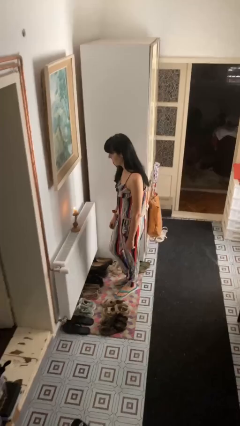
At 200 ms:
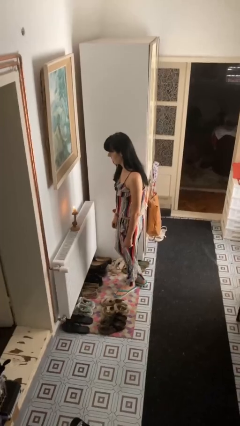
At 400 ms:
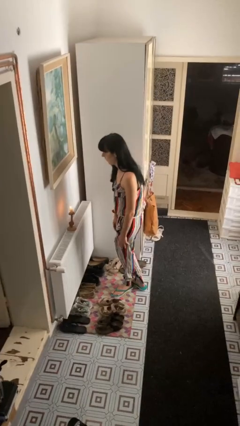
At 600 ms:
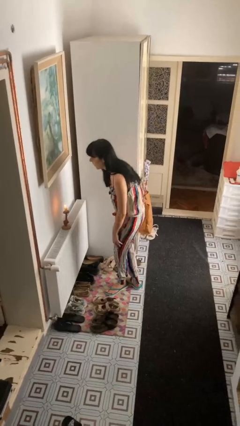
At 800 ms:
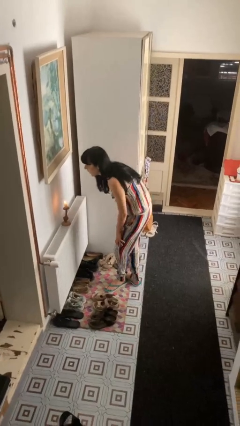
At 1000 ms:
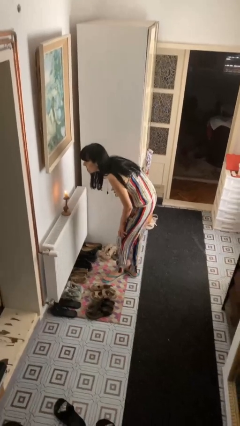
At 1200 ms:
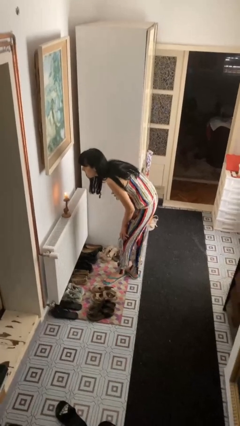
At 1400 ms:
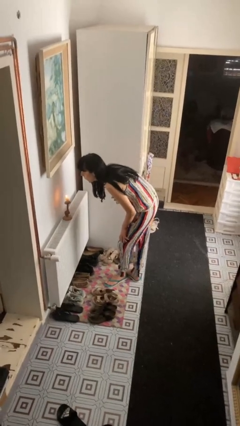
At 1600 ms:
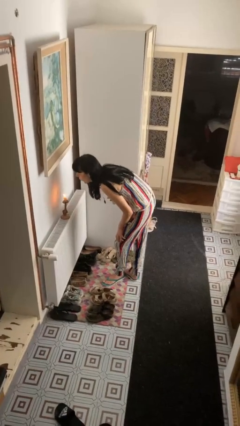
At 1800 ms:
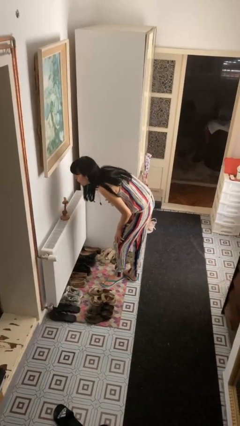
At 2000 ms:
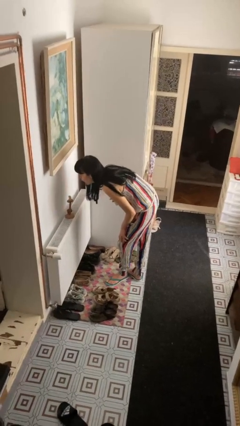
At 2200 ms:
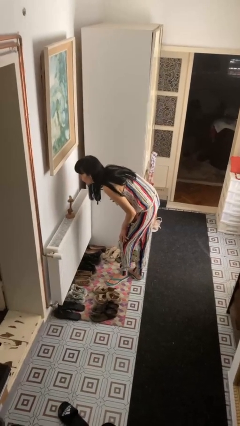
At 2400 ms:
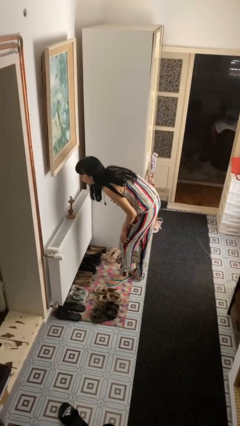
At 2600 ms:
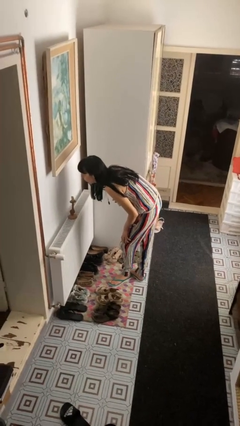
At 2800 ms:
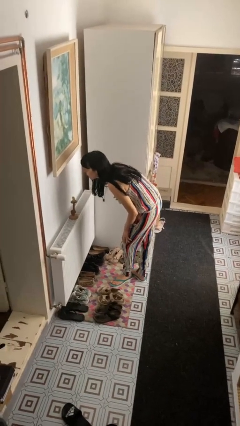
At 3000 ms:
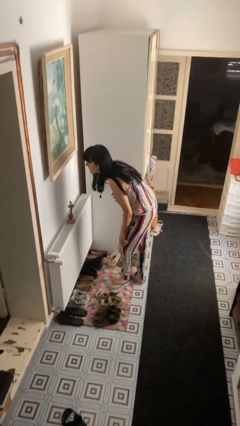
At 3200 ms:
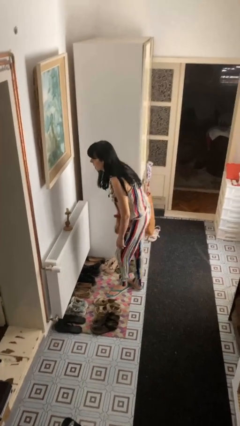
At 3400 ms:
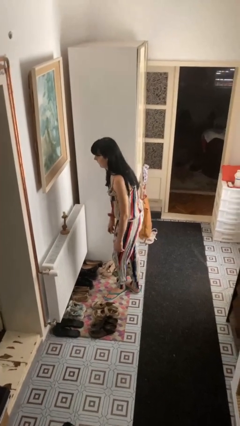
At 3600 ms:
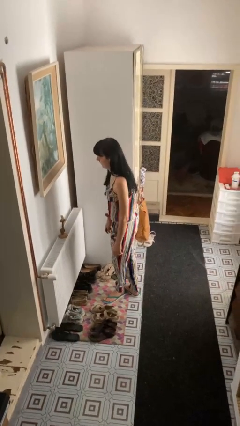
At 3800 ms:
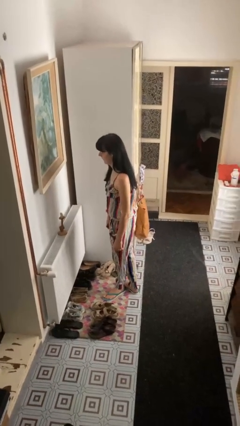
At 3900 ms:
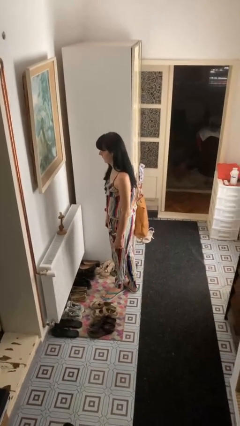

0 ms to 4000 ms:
person extinguishes candle

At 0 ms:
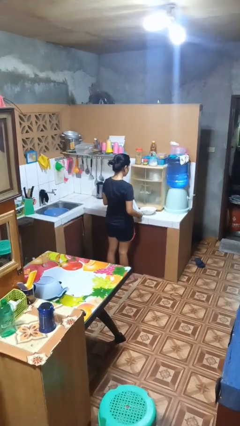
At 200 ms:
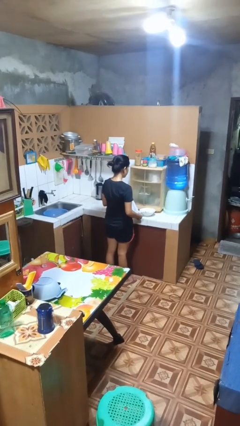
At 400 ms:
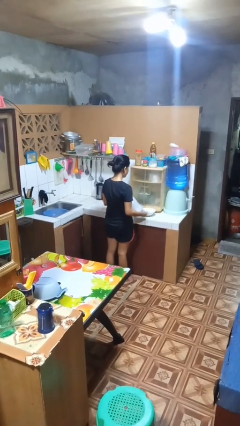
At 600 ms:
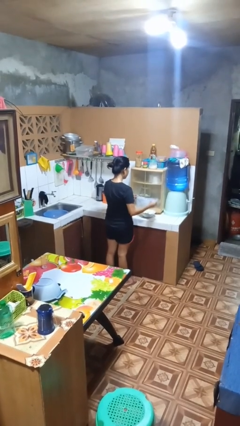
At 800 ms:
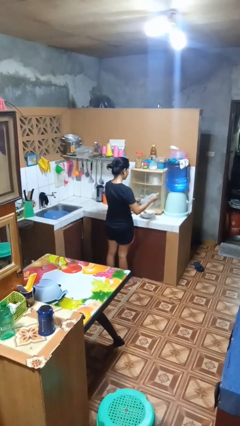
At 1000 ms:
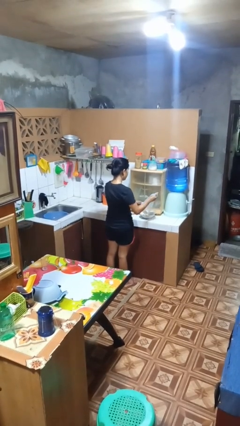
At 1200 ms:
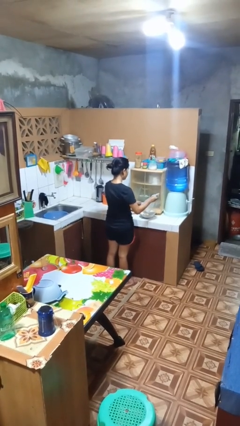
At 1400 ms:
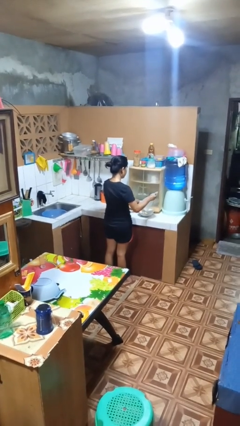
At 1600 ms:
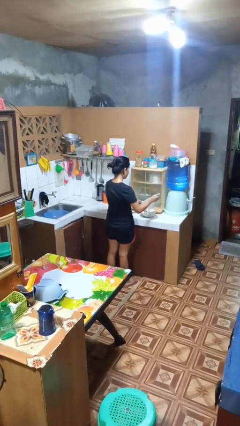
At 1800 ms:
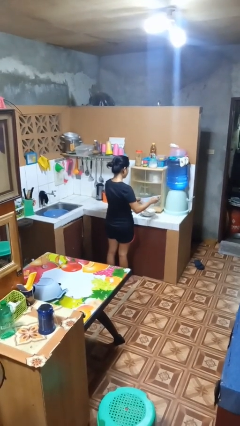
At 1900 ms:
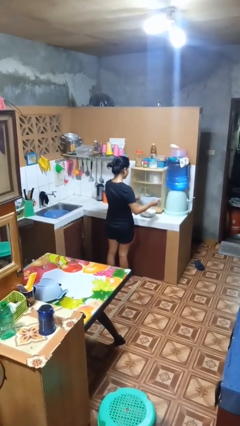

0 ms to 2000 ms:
person pours into bowl

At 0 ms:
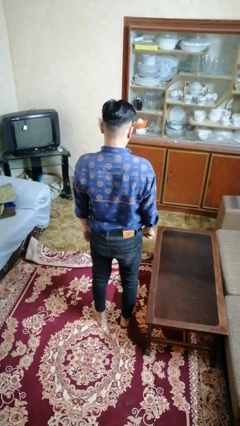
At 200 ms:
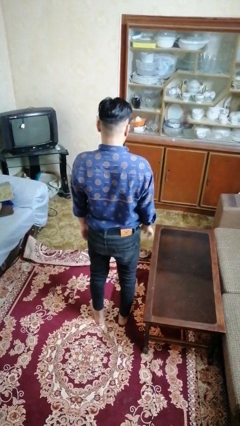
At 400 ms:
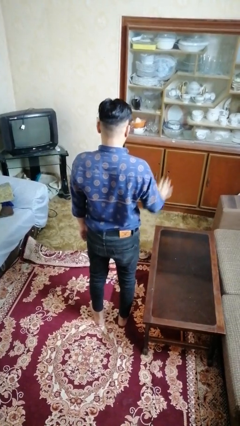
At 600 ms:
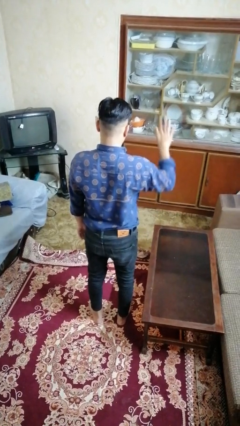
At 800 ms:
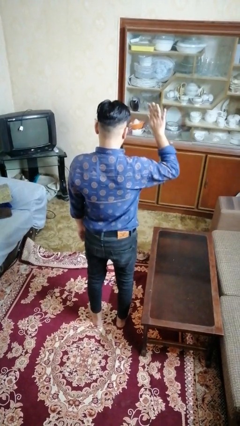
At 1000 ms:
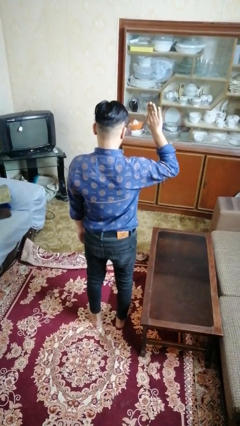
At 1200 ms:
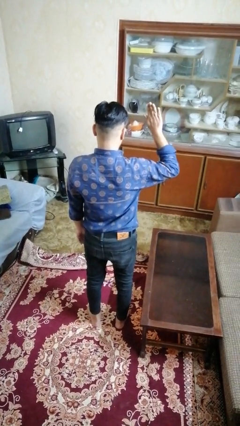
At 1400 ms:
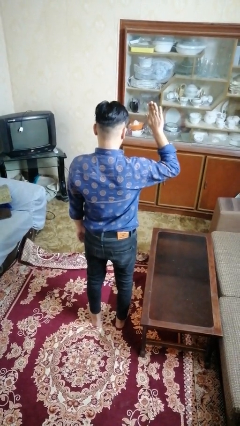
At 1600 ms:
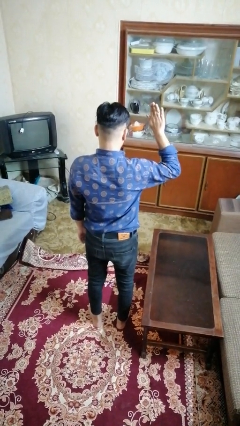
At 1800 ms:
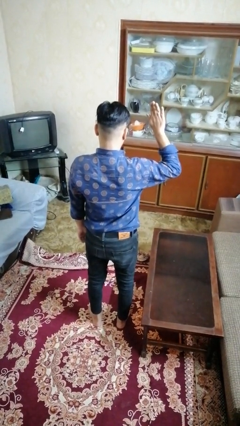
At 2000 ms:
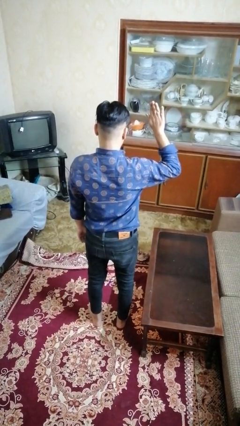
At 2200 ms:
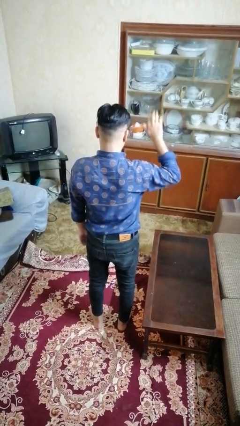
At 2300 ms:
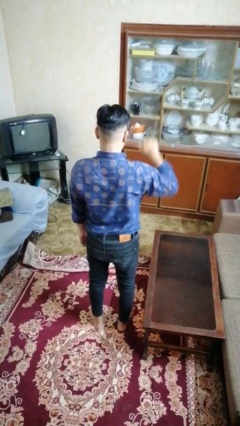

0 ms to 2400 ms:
person gestures number five

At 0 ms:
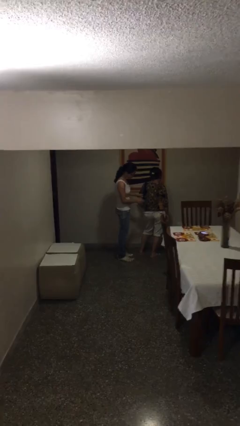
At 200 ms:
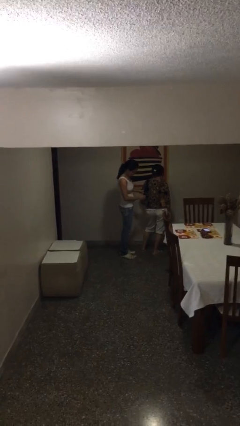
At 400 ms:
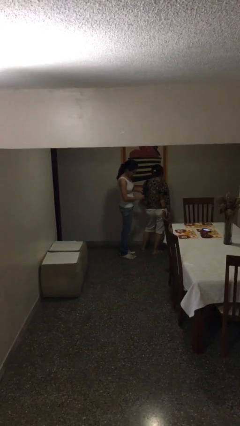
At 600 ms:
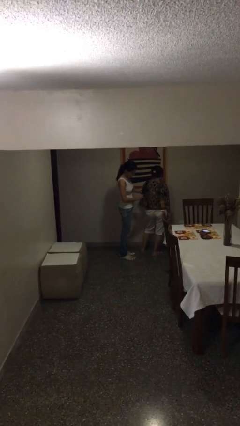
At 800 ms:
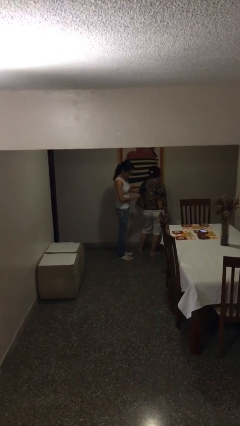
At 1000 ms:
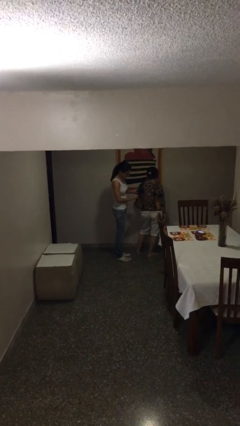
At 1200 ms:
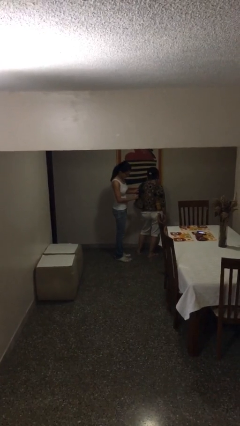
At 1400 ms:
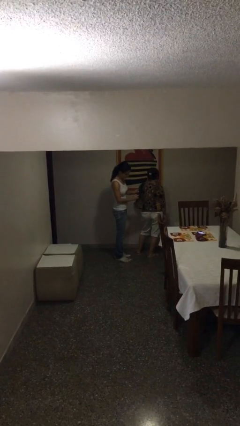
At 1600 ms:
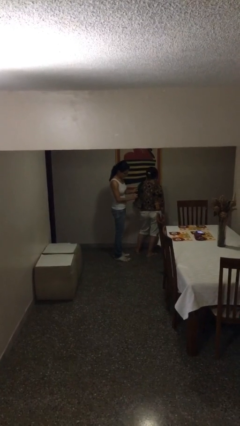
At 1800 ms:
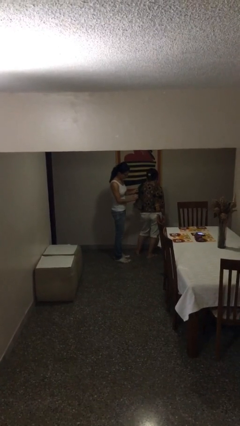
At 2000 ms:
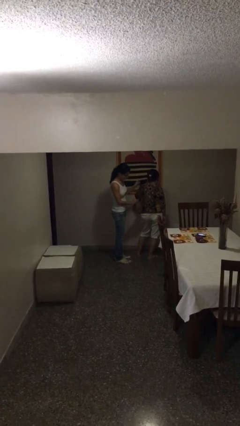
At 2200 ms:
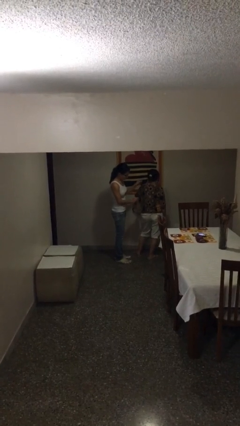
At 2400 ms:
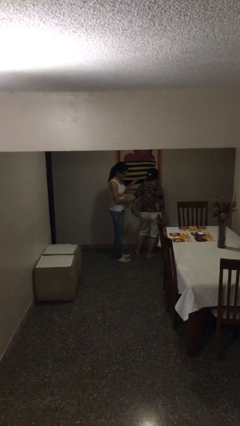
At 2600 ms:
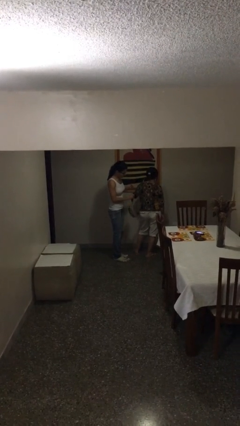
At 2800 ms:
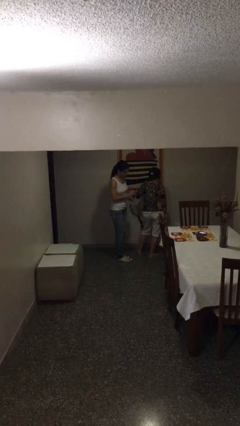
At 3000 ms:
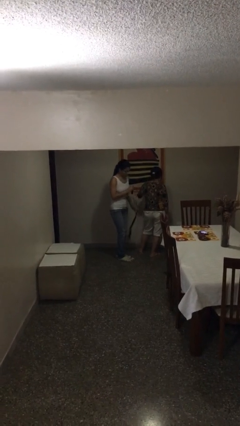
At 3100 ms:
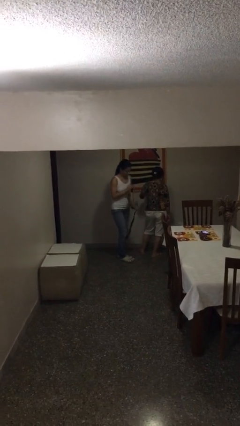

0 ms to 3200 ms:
person steals object from person

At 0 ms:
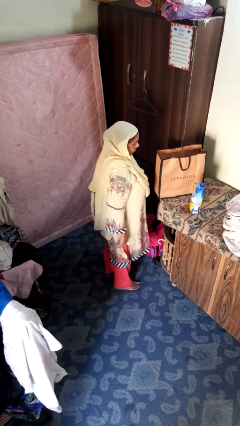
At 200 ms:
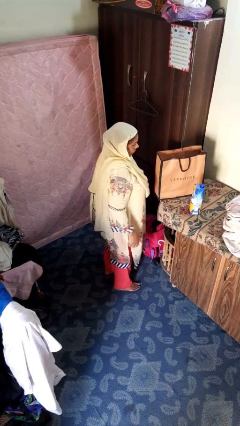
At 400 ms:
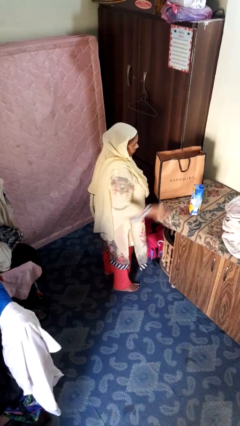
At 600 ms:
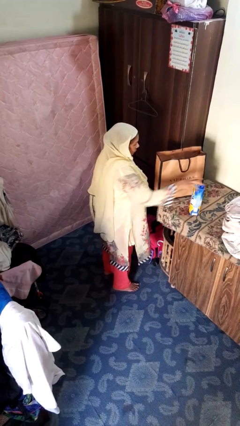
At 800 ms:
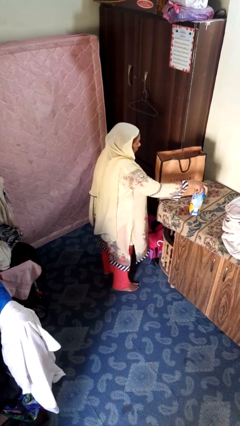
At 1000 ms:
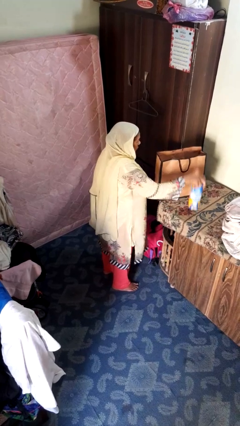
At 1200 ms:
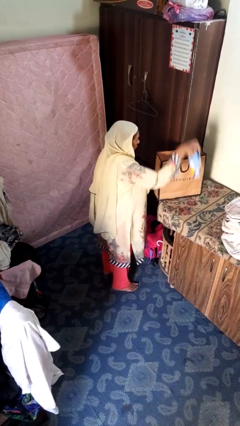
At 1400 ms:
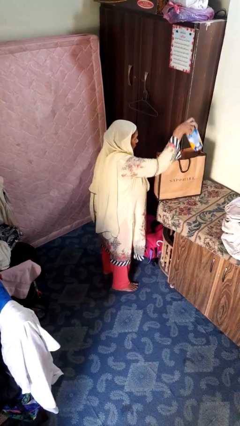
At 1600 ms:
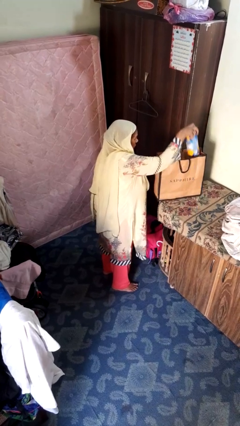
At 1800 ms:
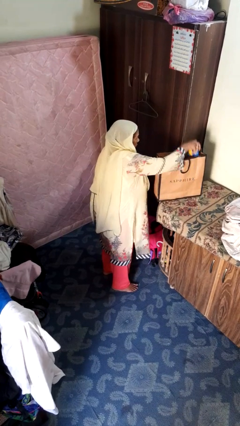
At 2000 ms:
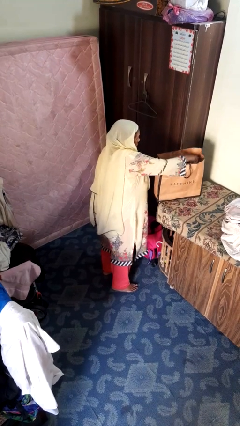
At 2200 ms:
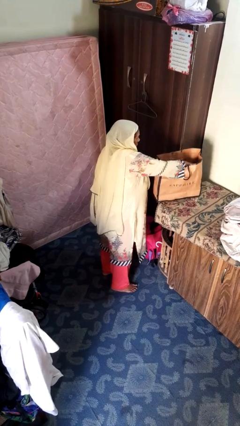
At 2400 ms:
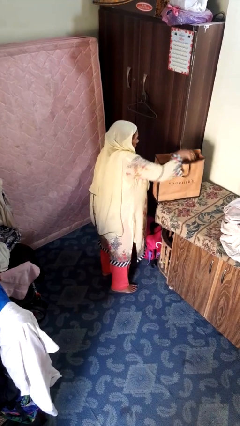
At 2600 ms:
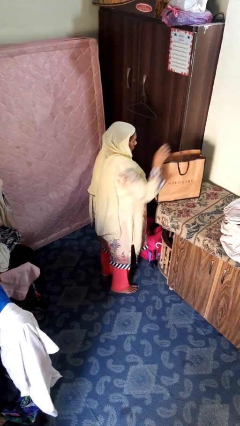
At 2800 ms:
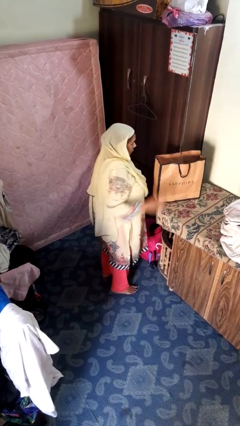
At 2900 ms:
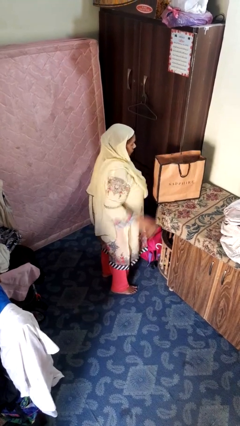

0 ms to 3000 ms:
person puts object into bag

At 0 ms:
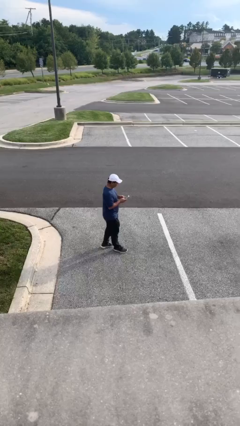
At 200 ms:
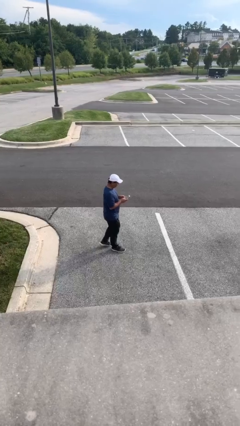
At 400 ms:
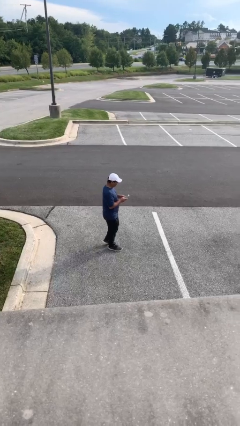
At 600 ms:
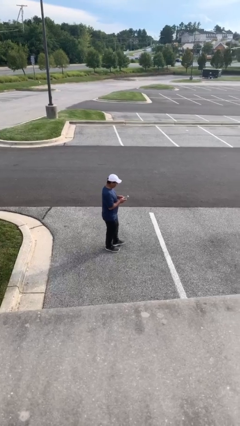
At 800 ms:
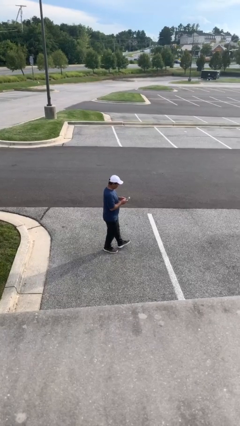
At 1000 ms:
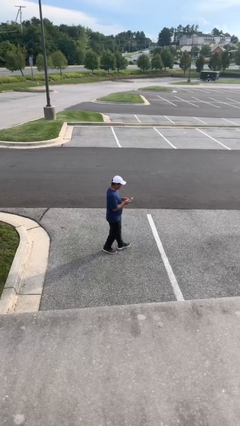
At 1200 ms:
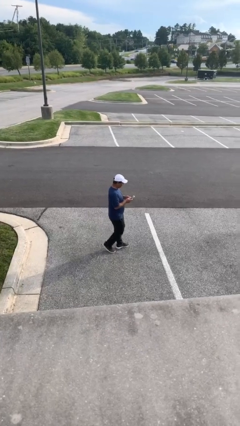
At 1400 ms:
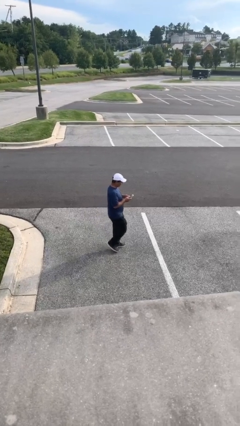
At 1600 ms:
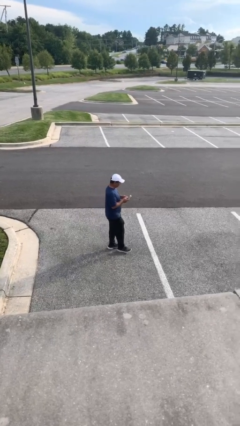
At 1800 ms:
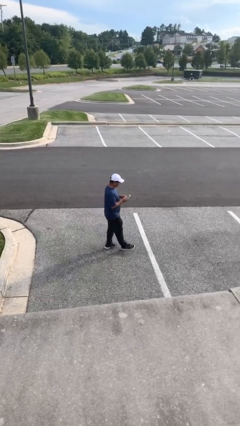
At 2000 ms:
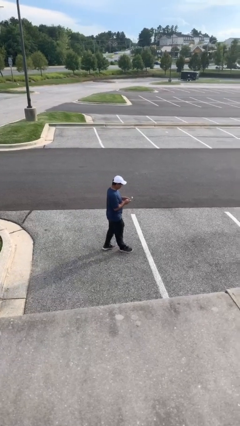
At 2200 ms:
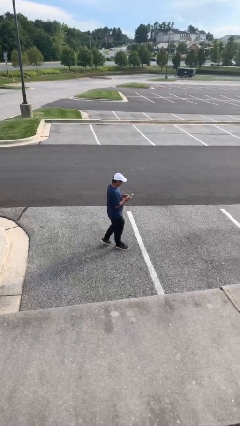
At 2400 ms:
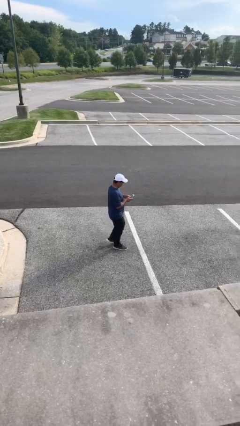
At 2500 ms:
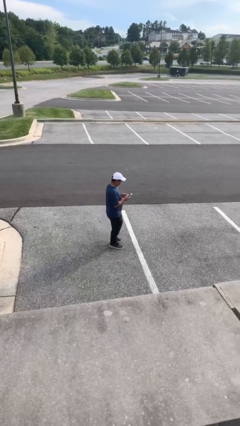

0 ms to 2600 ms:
person texts on phone
